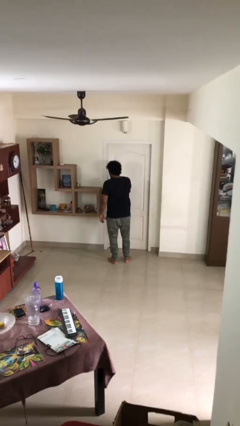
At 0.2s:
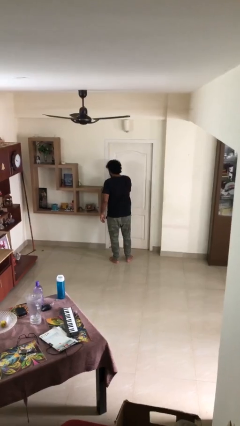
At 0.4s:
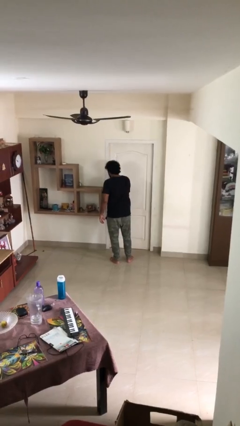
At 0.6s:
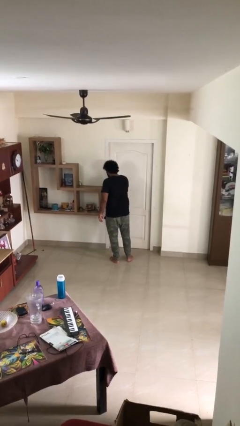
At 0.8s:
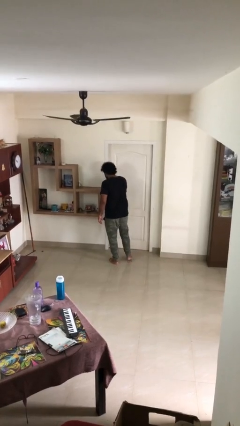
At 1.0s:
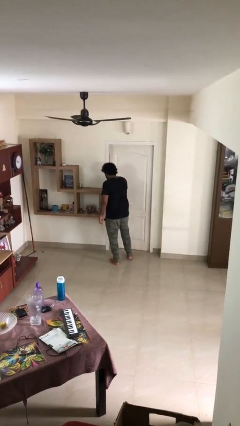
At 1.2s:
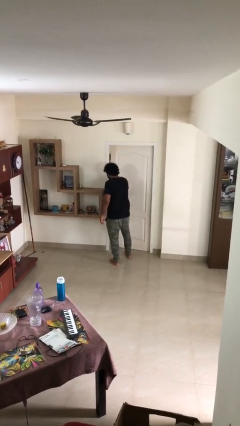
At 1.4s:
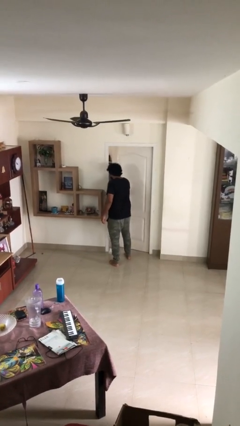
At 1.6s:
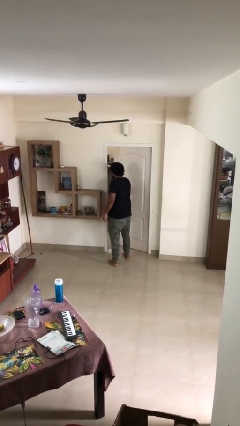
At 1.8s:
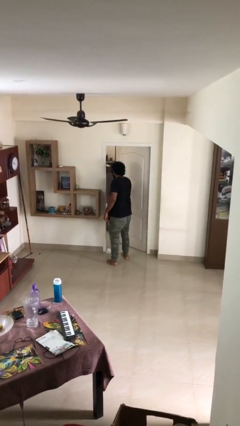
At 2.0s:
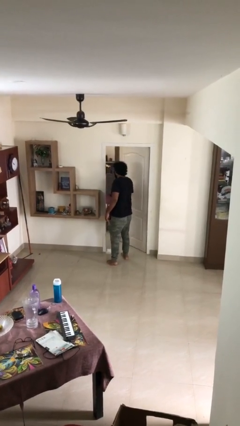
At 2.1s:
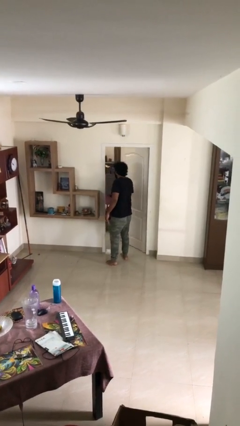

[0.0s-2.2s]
person opens facility door

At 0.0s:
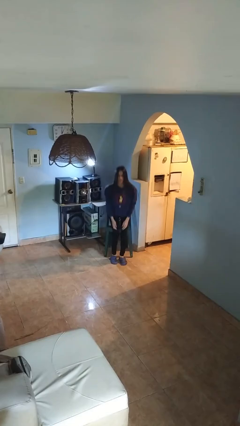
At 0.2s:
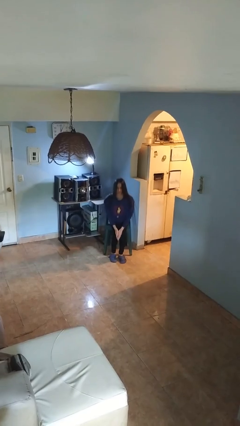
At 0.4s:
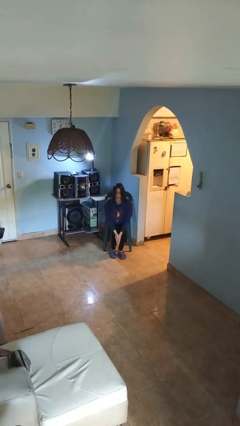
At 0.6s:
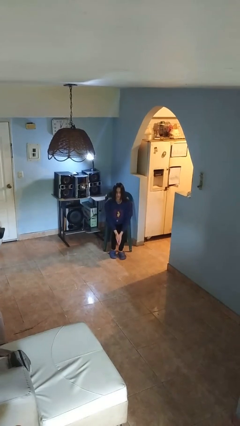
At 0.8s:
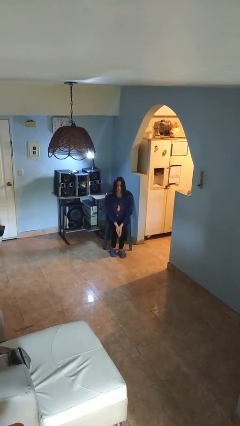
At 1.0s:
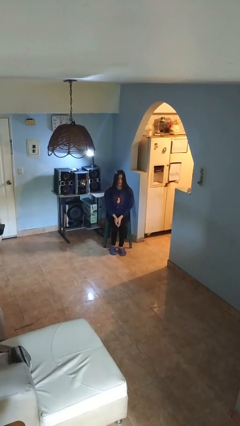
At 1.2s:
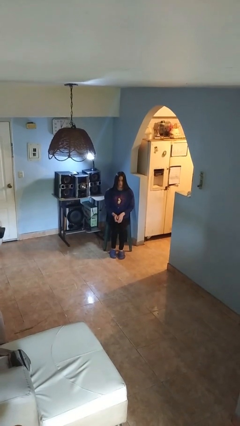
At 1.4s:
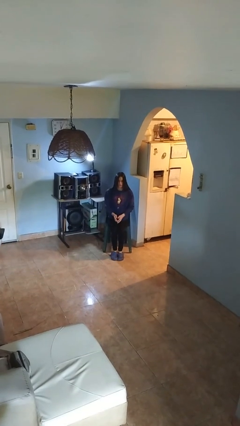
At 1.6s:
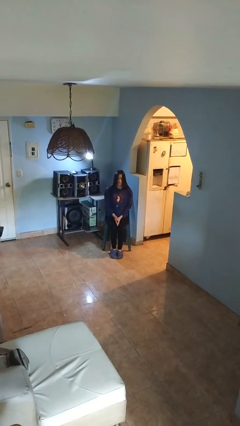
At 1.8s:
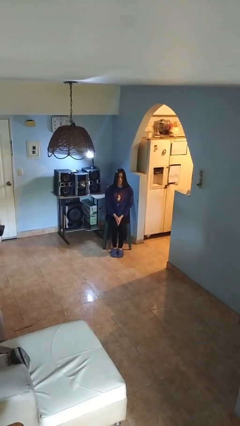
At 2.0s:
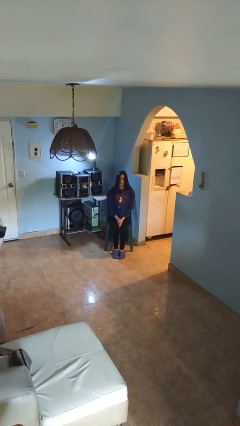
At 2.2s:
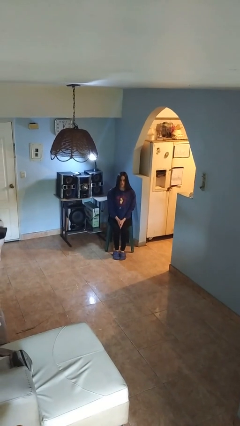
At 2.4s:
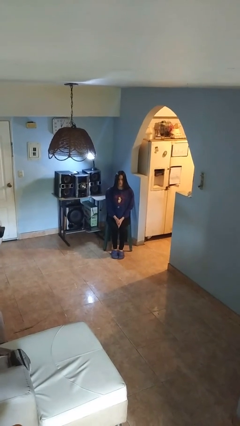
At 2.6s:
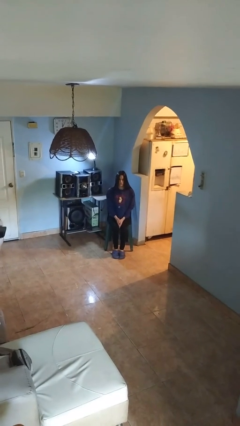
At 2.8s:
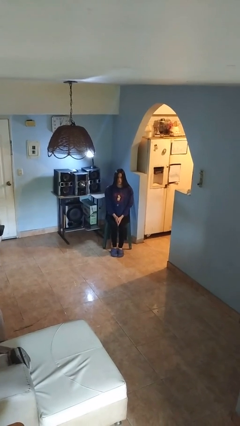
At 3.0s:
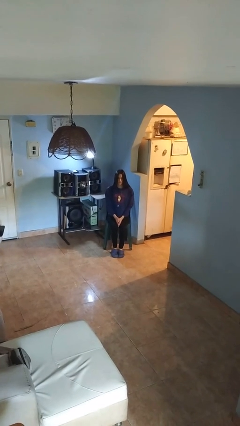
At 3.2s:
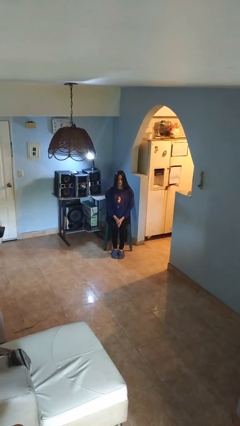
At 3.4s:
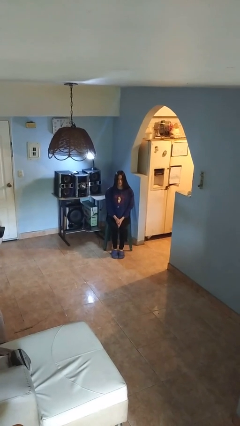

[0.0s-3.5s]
person sits down

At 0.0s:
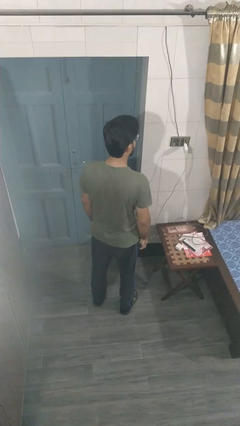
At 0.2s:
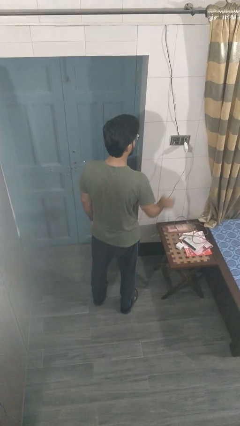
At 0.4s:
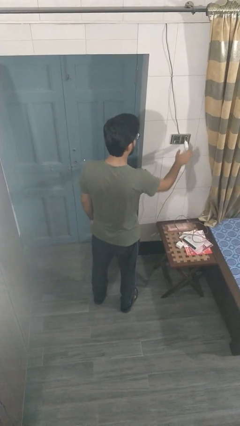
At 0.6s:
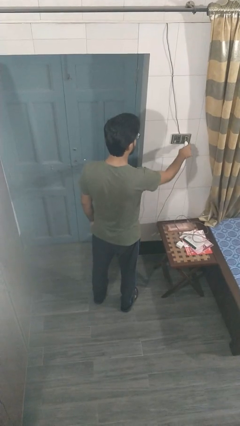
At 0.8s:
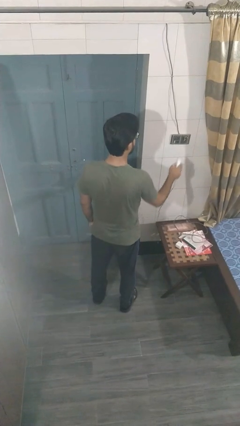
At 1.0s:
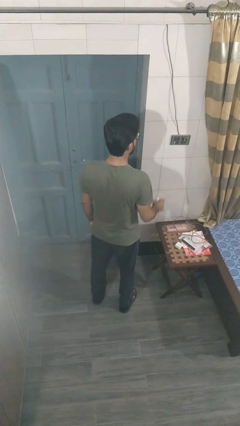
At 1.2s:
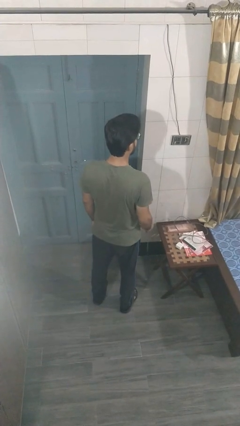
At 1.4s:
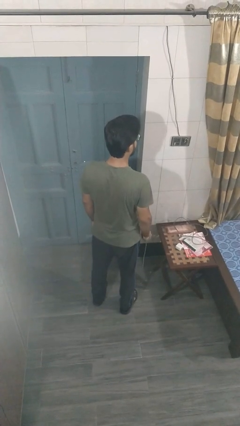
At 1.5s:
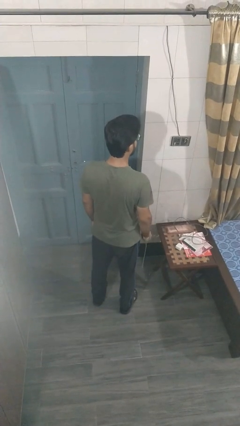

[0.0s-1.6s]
person unplugs from electrical socket

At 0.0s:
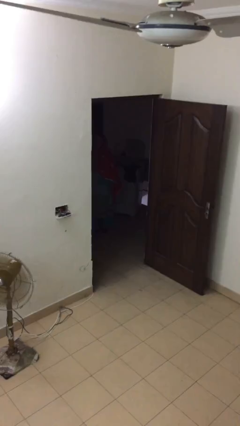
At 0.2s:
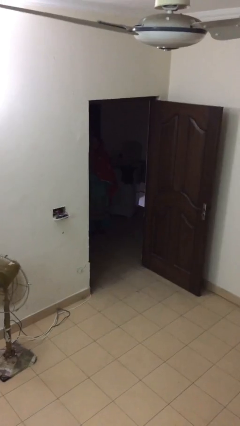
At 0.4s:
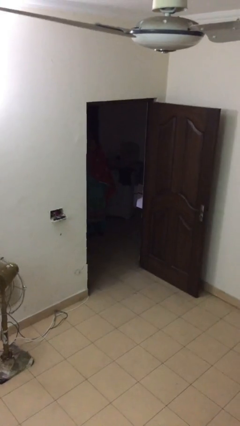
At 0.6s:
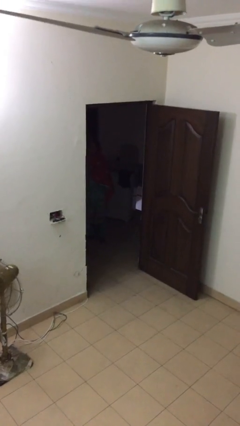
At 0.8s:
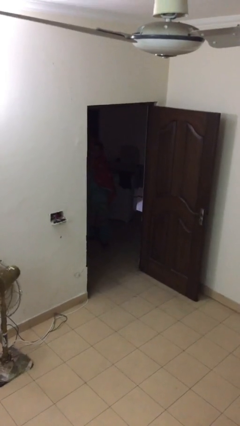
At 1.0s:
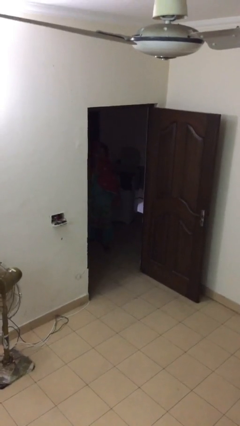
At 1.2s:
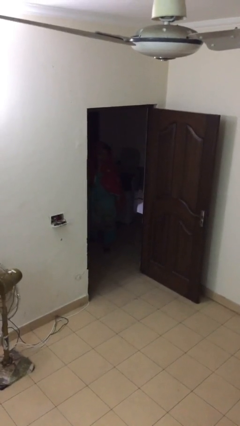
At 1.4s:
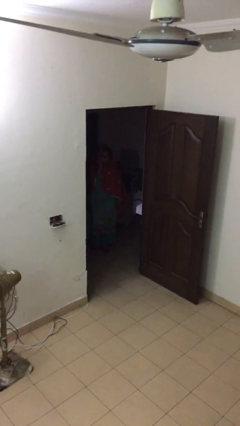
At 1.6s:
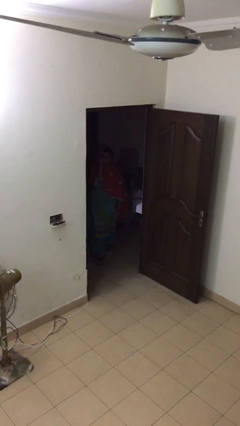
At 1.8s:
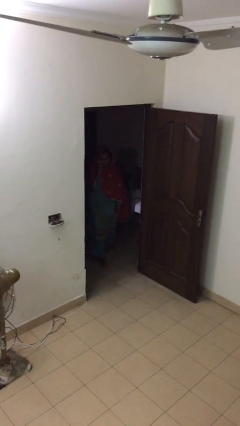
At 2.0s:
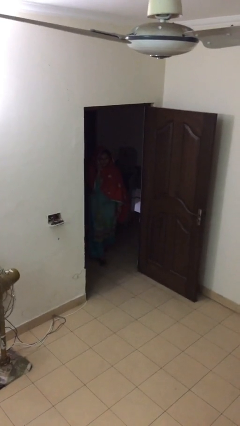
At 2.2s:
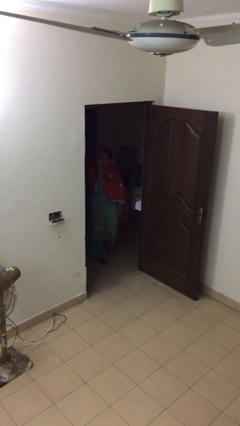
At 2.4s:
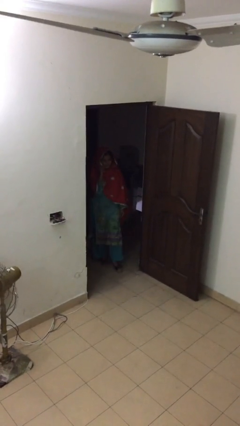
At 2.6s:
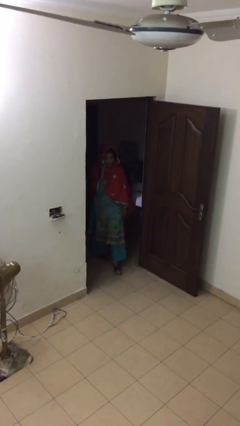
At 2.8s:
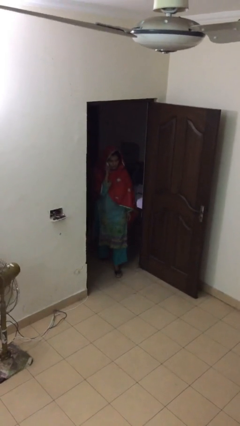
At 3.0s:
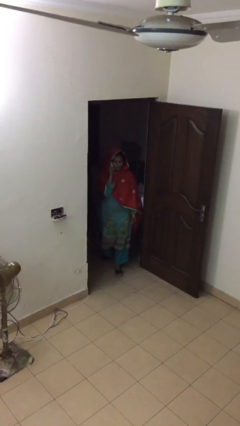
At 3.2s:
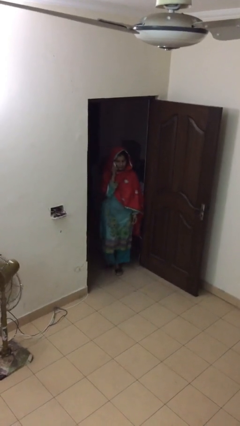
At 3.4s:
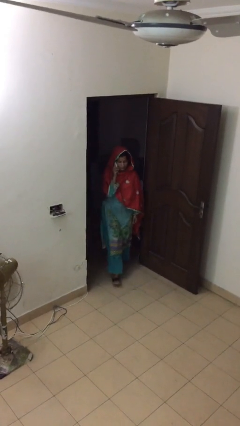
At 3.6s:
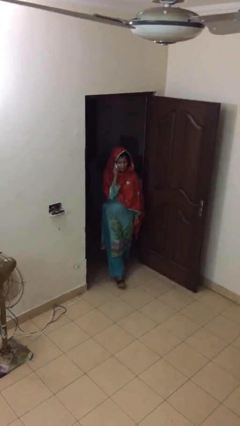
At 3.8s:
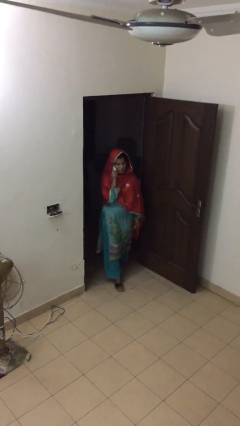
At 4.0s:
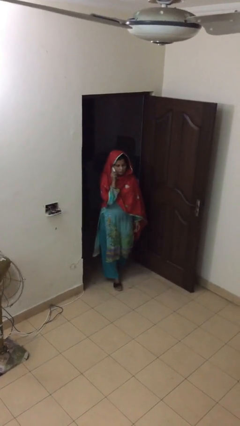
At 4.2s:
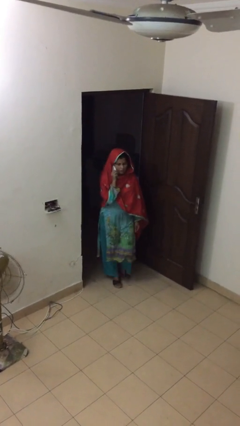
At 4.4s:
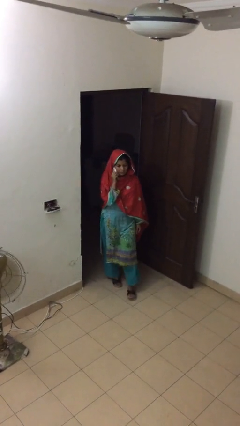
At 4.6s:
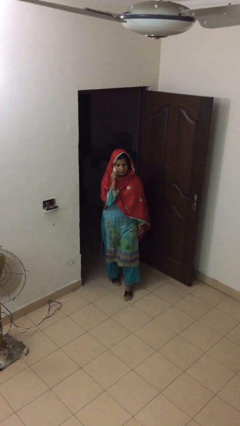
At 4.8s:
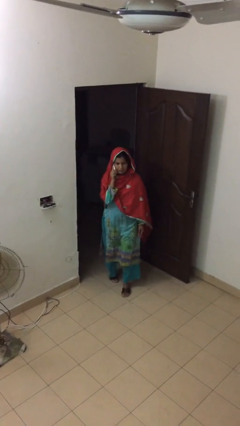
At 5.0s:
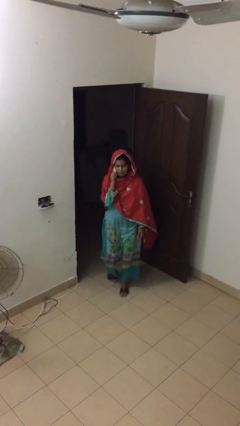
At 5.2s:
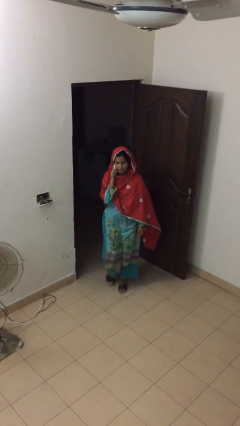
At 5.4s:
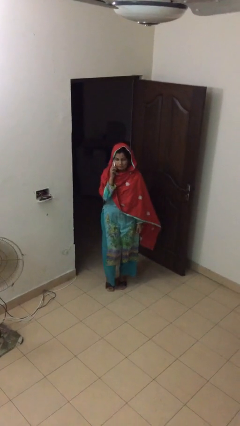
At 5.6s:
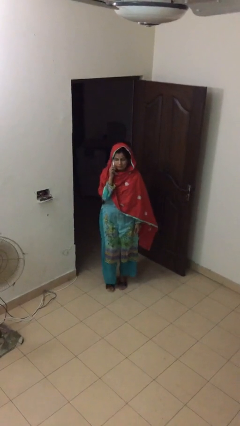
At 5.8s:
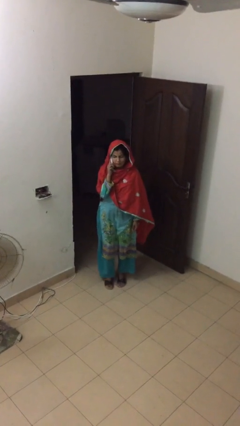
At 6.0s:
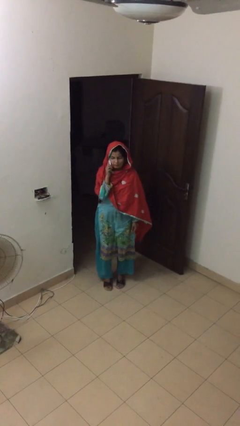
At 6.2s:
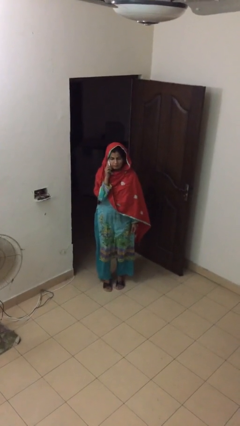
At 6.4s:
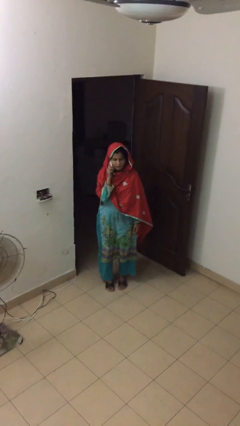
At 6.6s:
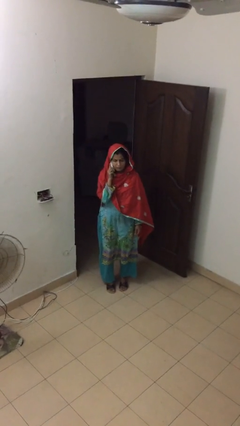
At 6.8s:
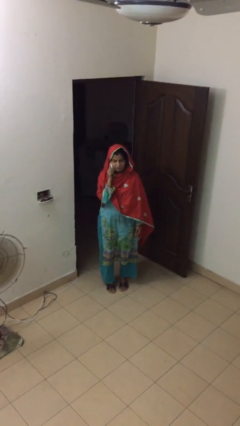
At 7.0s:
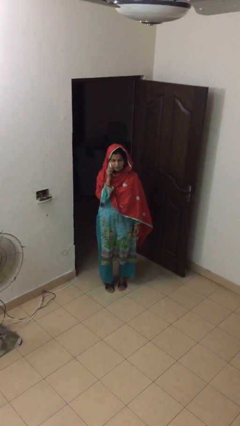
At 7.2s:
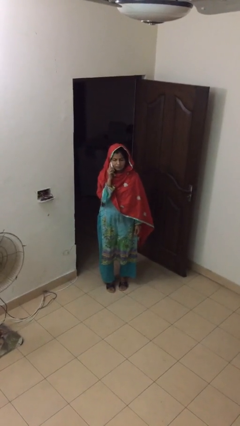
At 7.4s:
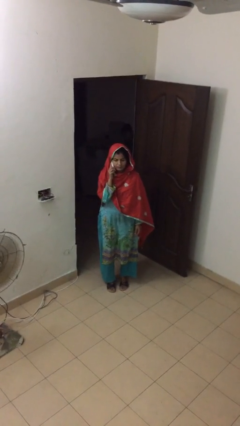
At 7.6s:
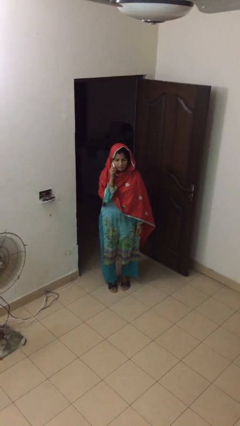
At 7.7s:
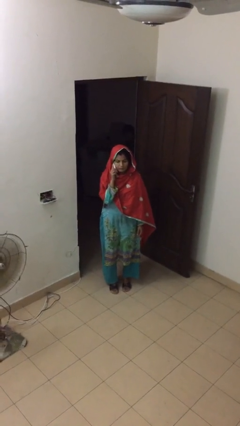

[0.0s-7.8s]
person enters scene through structure

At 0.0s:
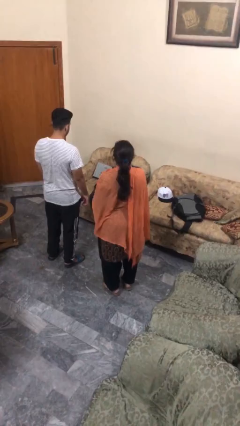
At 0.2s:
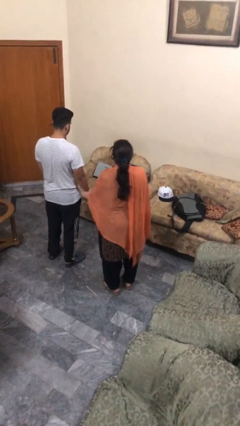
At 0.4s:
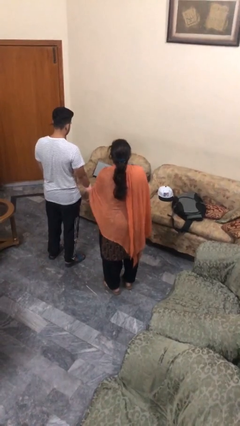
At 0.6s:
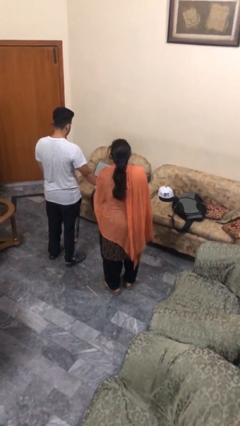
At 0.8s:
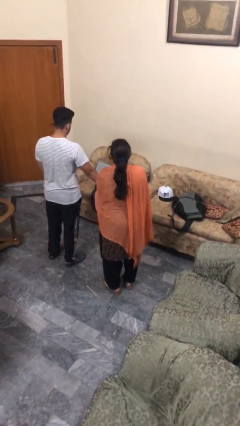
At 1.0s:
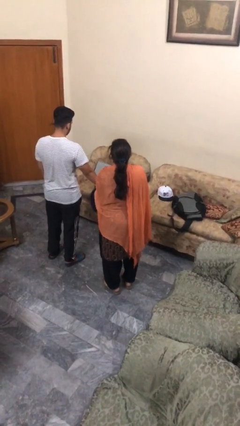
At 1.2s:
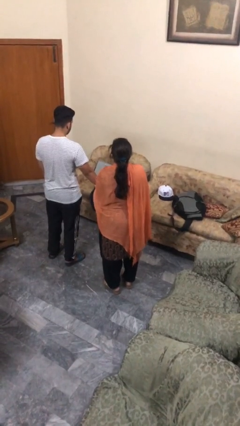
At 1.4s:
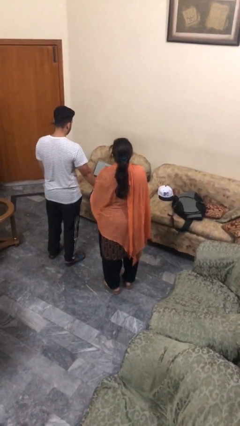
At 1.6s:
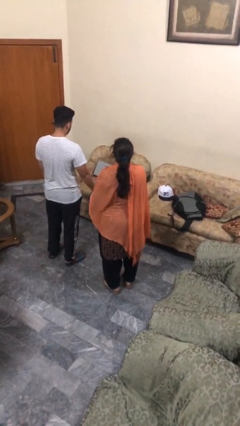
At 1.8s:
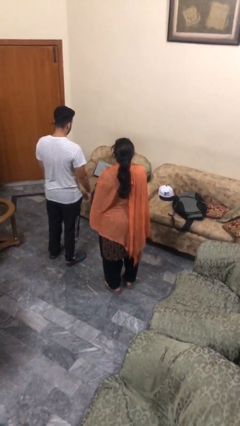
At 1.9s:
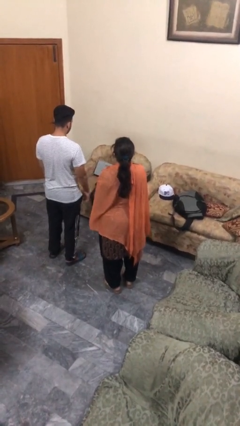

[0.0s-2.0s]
person grabs person by forearm

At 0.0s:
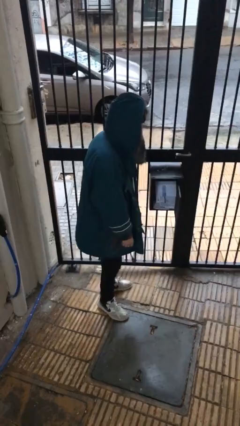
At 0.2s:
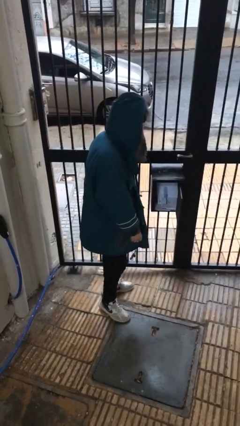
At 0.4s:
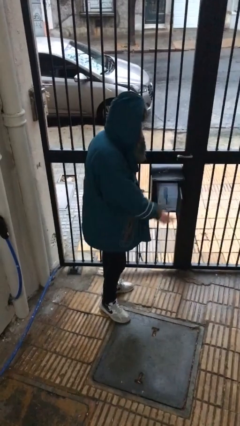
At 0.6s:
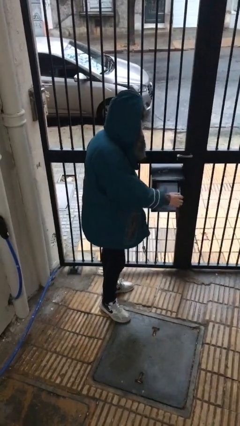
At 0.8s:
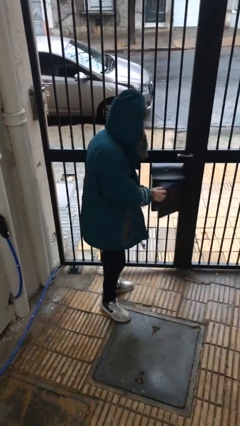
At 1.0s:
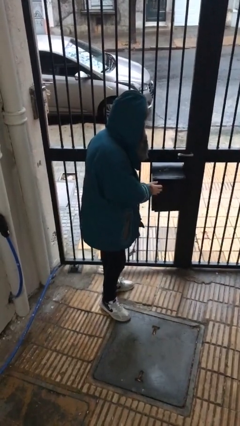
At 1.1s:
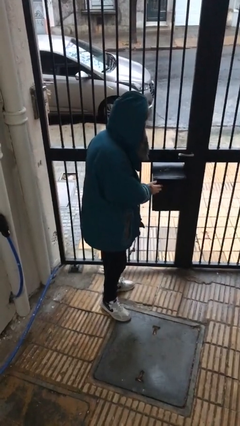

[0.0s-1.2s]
person closes mailbox
